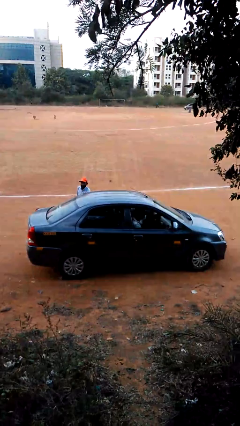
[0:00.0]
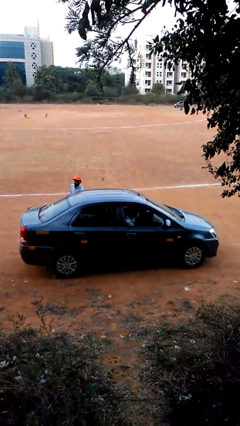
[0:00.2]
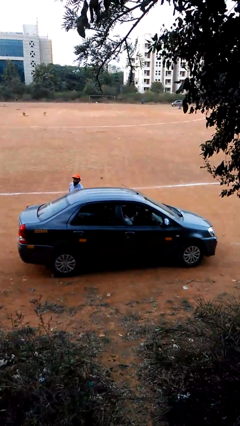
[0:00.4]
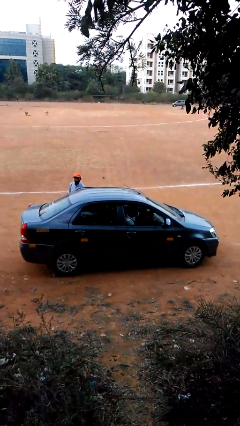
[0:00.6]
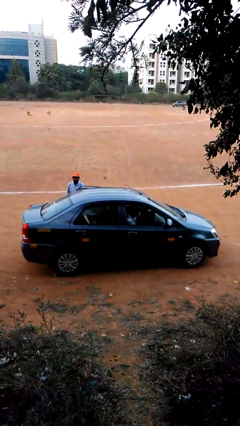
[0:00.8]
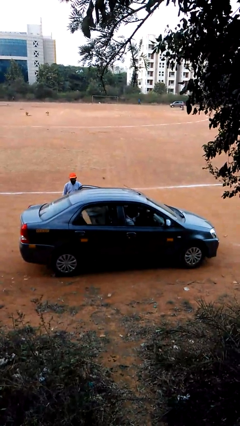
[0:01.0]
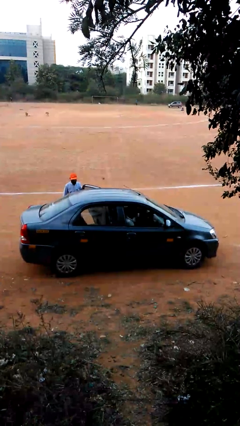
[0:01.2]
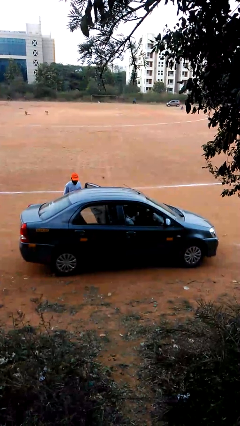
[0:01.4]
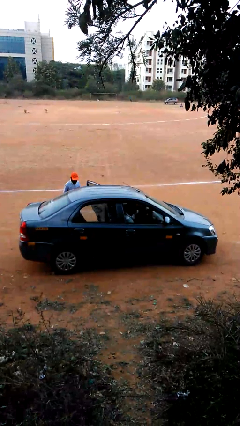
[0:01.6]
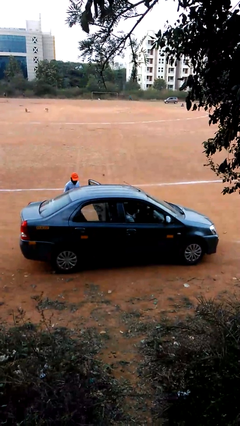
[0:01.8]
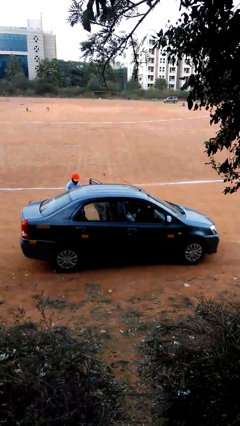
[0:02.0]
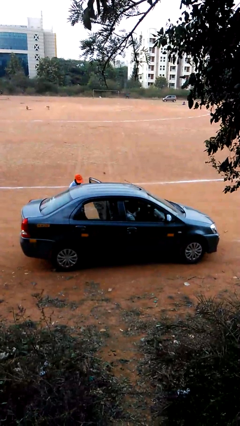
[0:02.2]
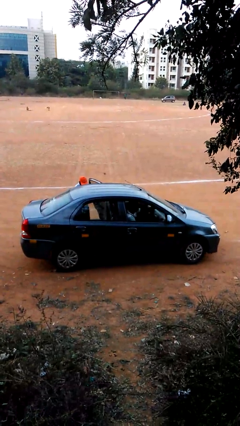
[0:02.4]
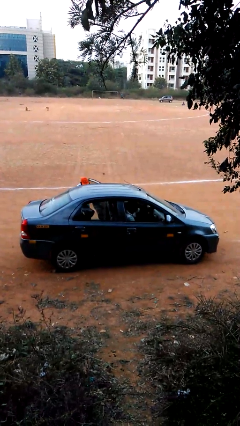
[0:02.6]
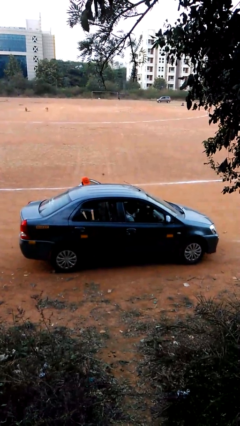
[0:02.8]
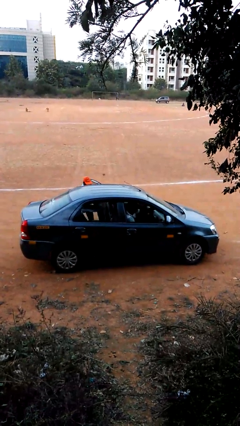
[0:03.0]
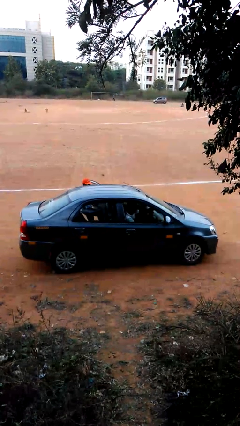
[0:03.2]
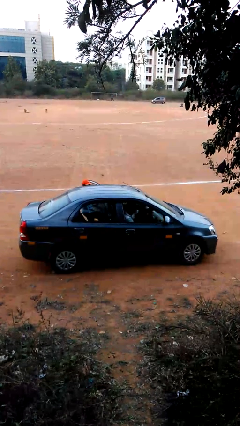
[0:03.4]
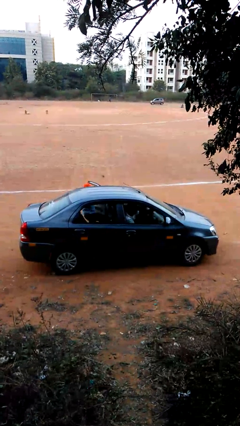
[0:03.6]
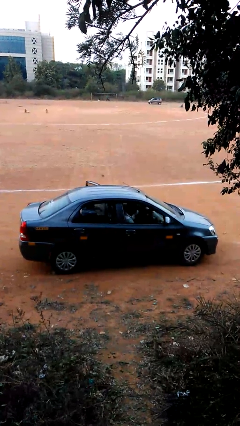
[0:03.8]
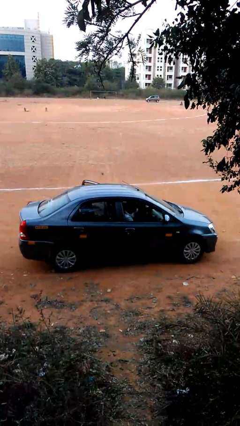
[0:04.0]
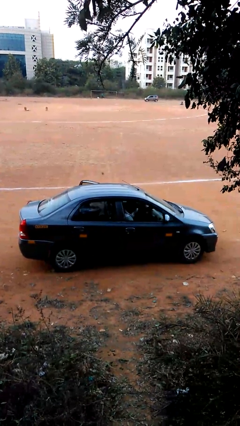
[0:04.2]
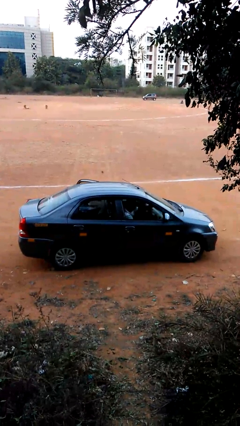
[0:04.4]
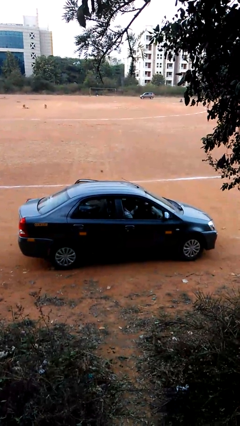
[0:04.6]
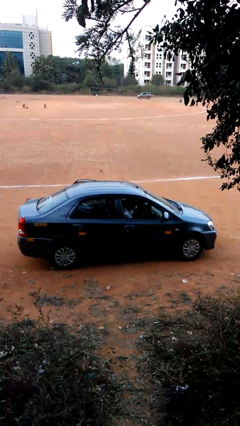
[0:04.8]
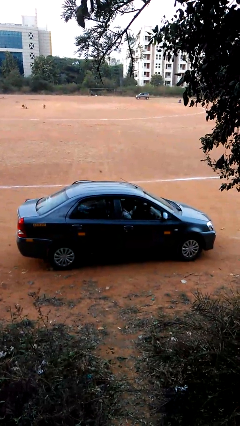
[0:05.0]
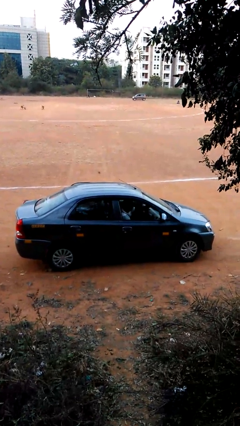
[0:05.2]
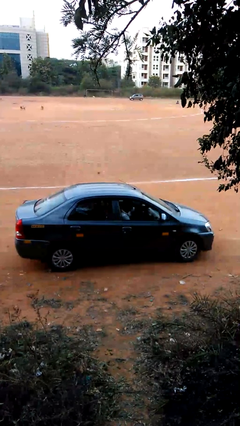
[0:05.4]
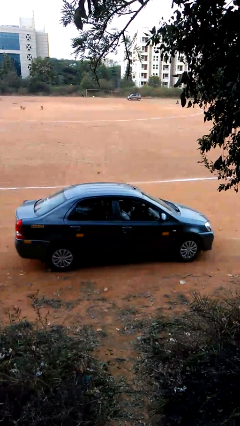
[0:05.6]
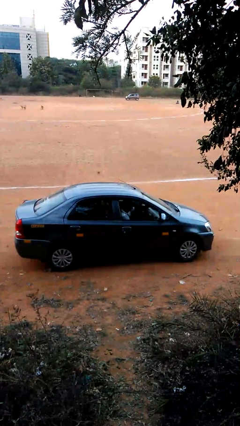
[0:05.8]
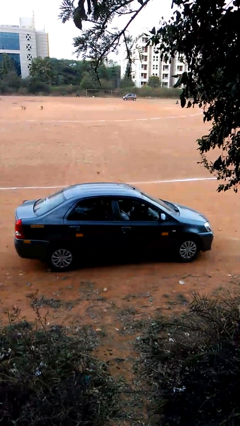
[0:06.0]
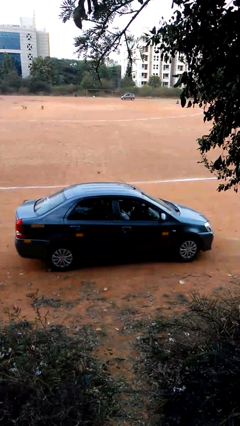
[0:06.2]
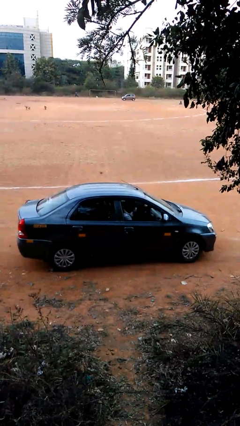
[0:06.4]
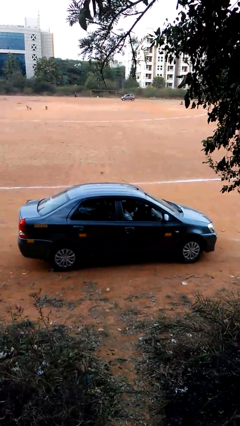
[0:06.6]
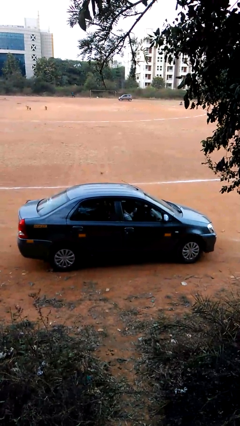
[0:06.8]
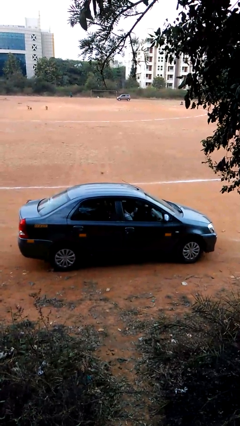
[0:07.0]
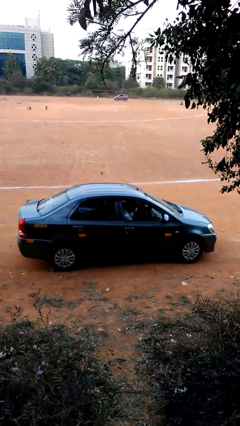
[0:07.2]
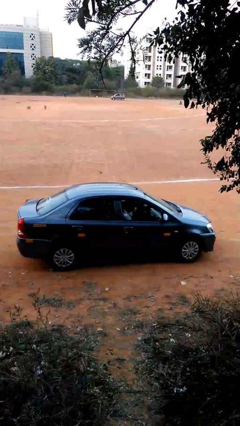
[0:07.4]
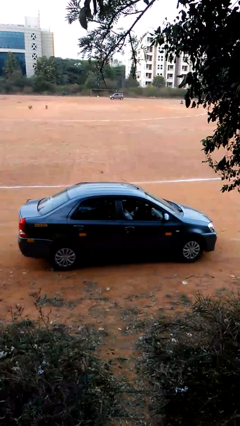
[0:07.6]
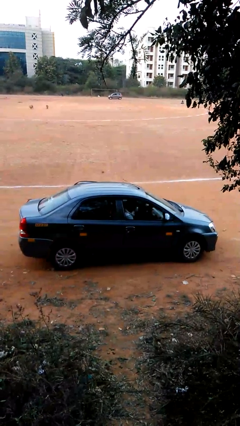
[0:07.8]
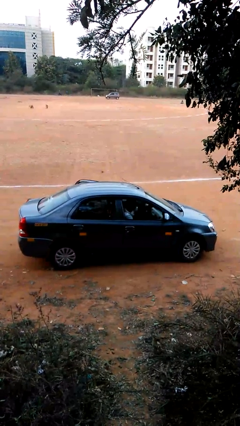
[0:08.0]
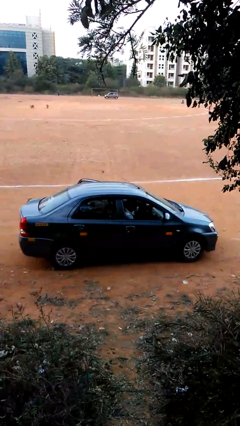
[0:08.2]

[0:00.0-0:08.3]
car picks up person

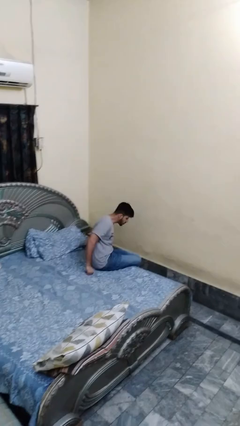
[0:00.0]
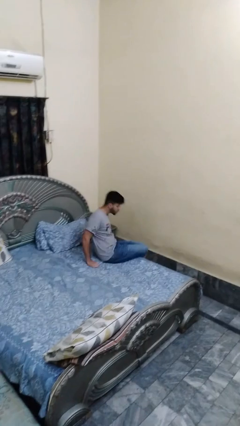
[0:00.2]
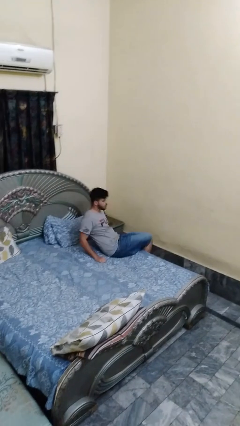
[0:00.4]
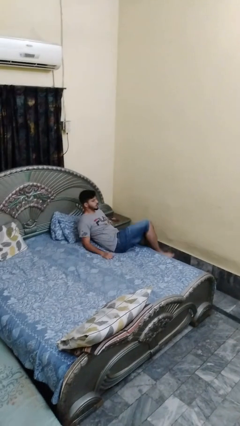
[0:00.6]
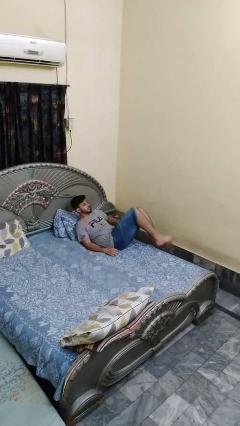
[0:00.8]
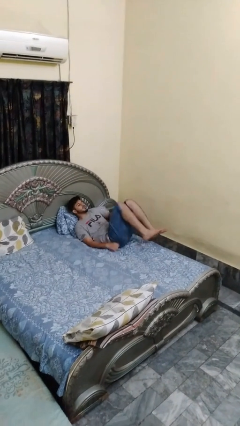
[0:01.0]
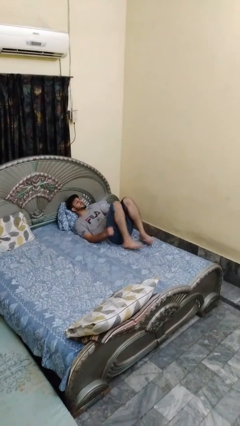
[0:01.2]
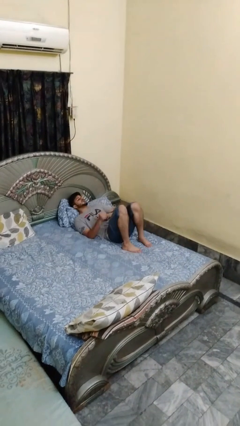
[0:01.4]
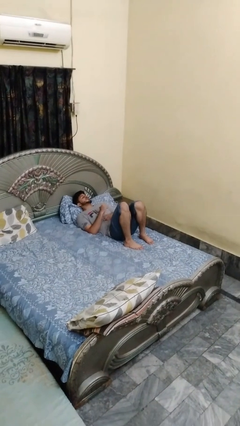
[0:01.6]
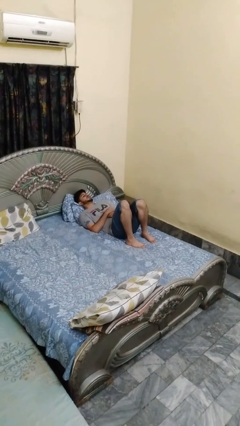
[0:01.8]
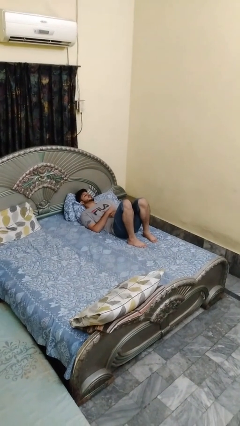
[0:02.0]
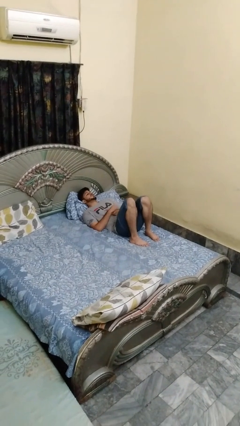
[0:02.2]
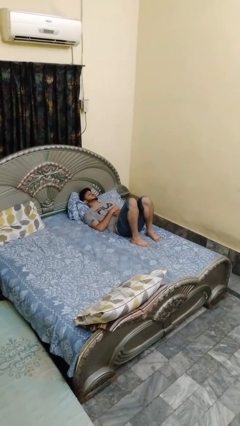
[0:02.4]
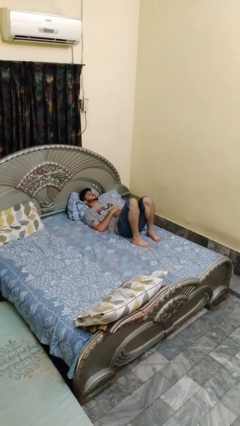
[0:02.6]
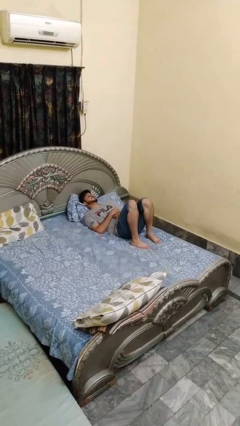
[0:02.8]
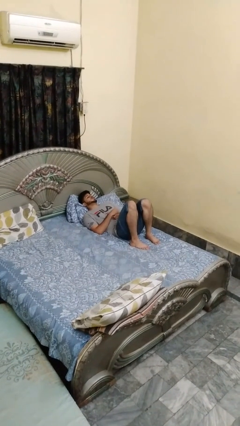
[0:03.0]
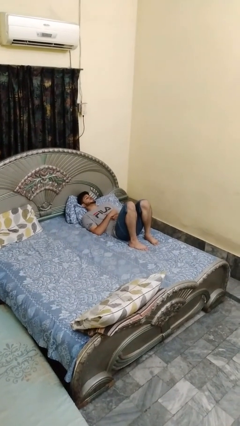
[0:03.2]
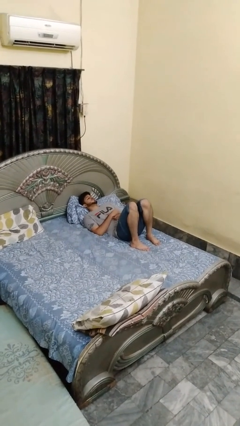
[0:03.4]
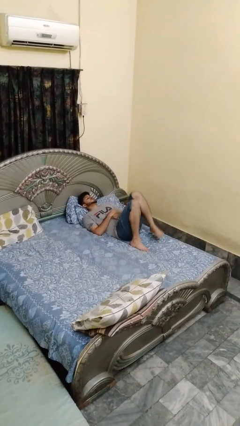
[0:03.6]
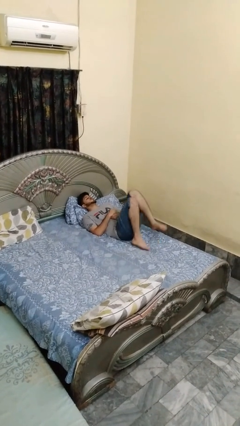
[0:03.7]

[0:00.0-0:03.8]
person lies down on bed

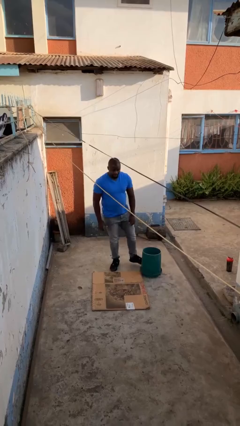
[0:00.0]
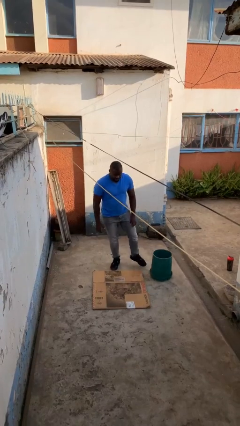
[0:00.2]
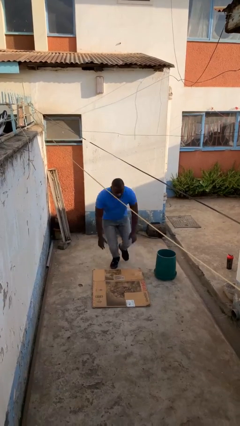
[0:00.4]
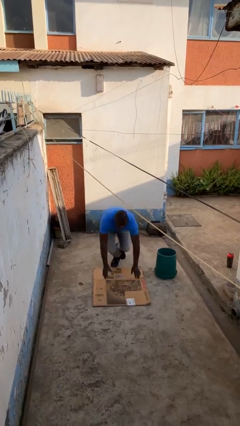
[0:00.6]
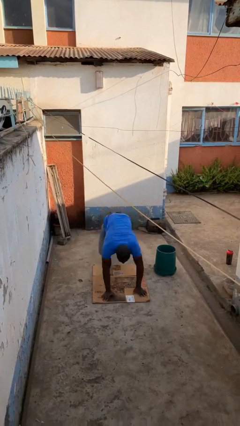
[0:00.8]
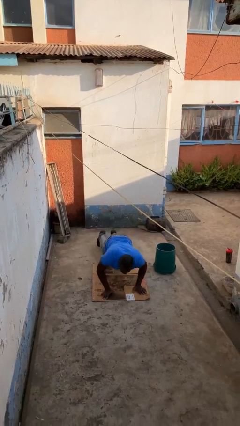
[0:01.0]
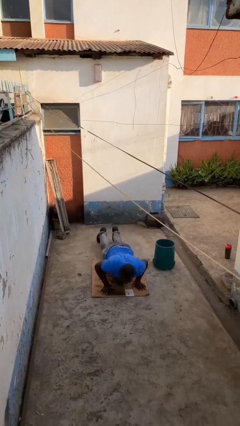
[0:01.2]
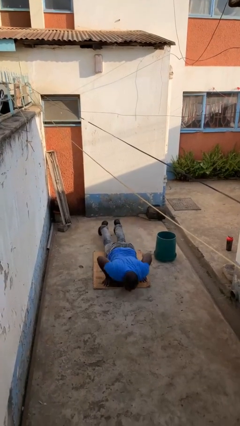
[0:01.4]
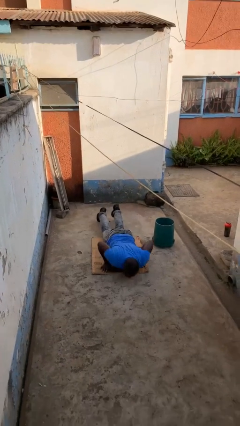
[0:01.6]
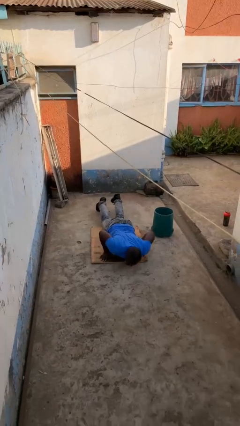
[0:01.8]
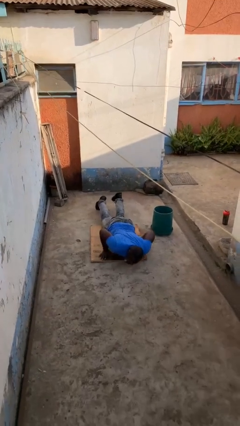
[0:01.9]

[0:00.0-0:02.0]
person trips on object on floor

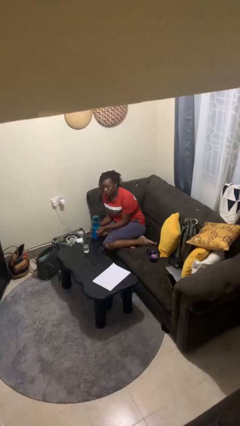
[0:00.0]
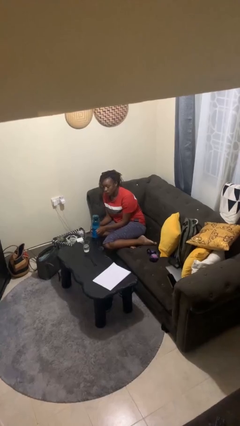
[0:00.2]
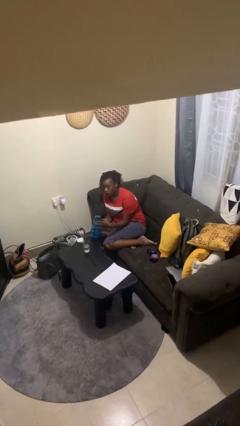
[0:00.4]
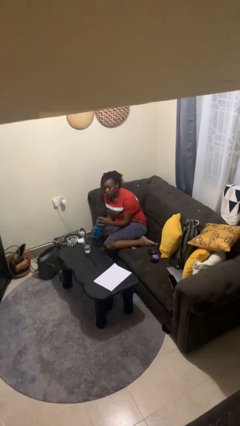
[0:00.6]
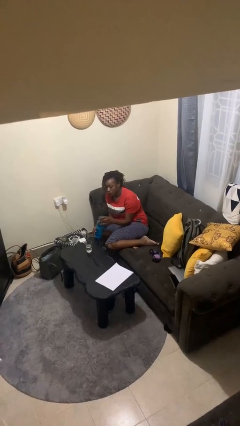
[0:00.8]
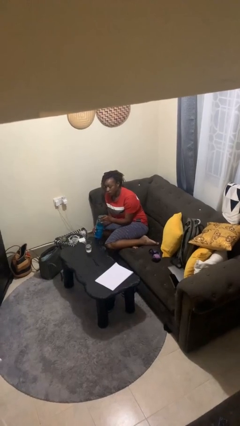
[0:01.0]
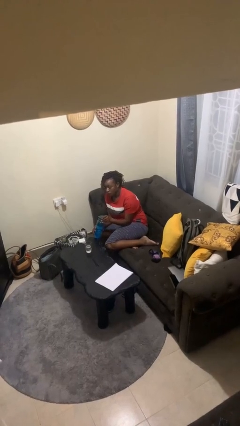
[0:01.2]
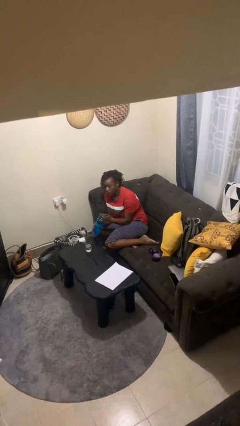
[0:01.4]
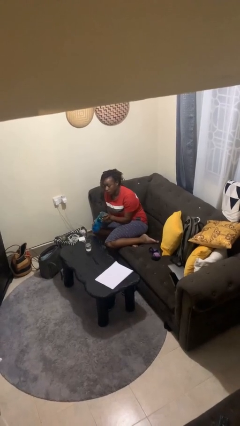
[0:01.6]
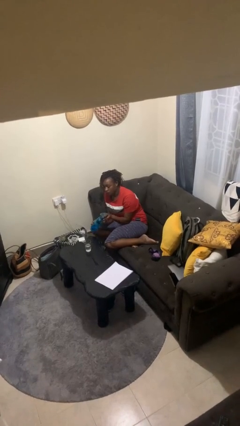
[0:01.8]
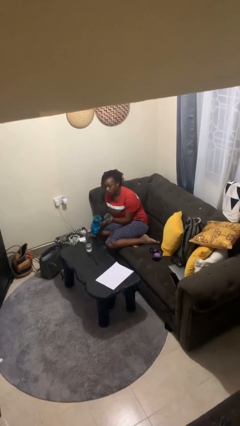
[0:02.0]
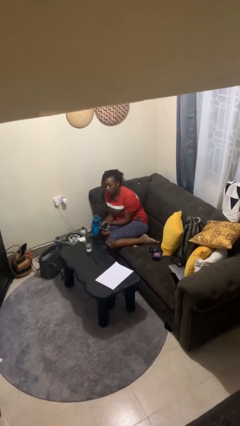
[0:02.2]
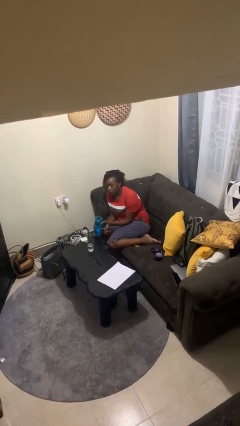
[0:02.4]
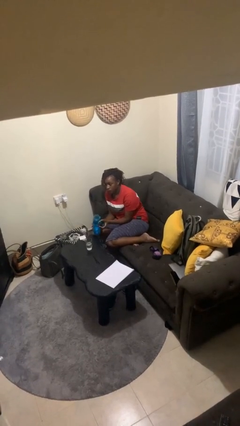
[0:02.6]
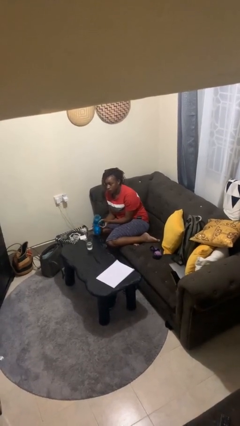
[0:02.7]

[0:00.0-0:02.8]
person unscrews lid from bottle

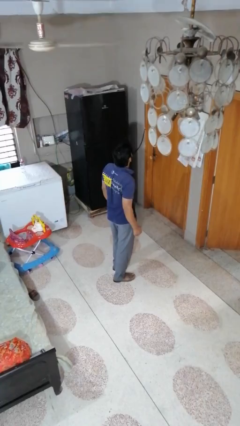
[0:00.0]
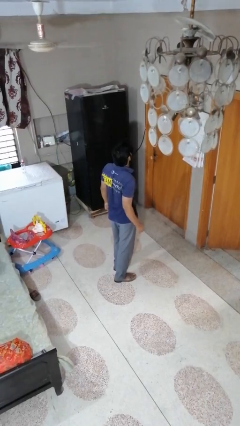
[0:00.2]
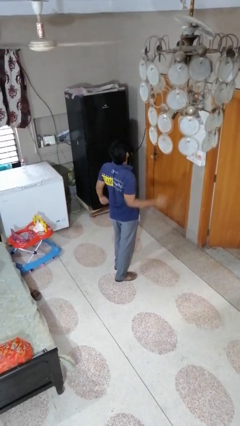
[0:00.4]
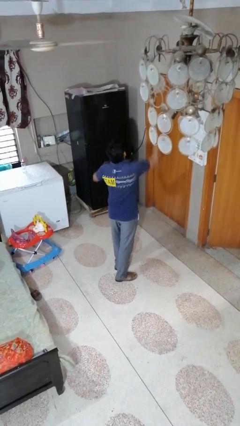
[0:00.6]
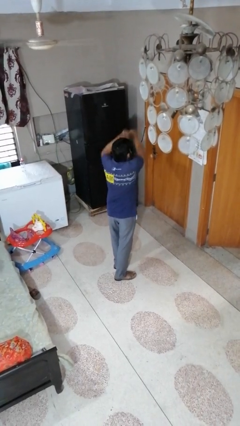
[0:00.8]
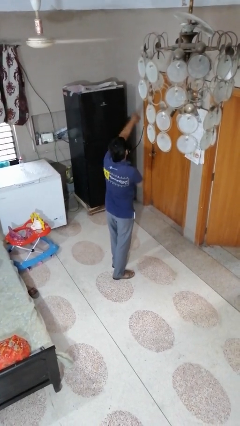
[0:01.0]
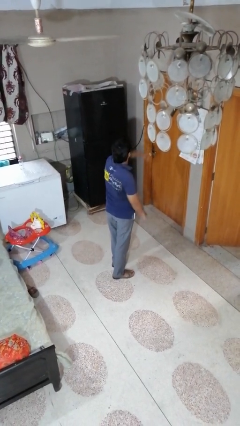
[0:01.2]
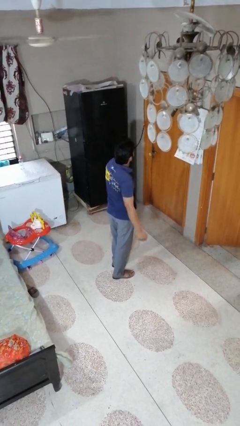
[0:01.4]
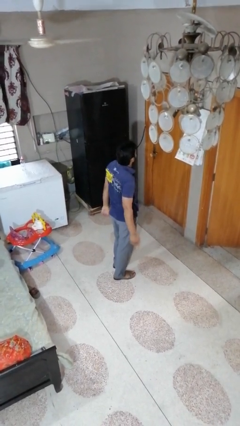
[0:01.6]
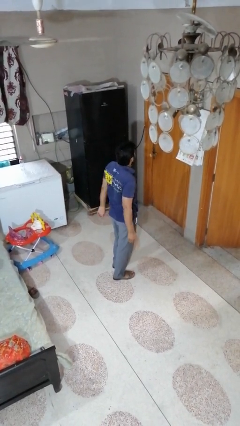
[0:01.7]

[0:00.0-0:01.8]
person punches
